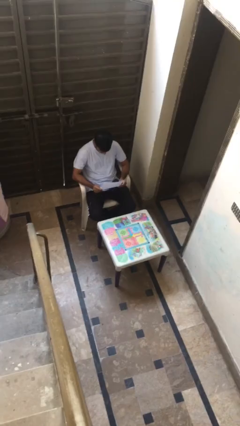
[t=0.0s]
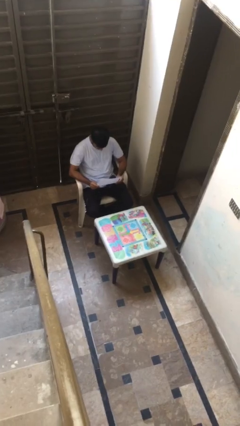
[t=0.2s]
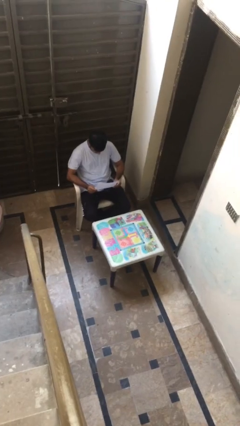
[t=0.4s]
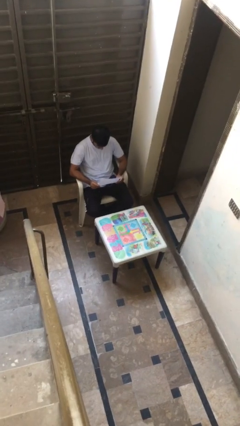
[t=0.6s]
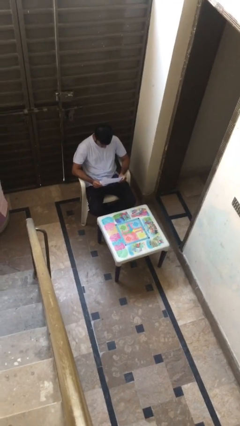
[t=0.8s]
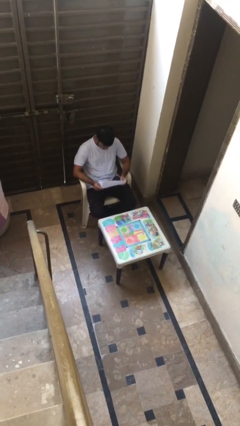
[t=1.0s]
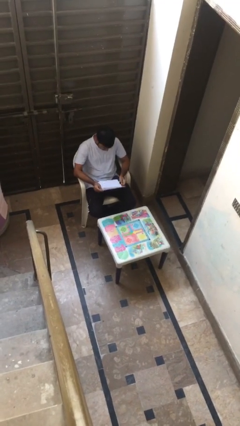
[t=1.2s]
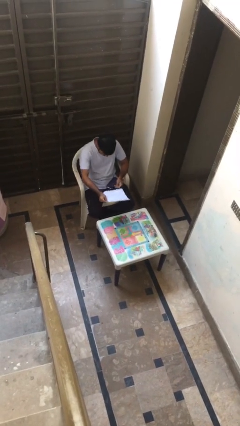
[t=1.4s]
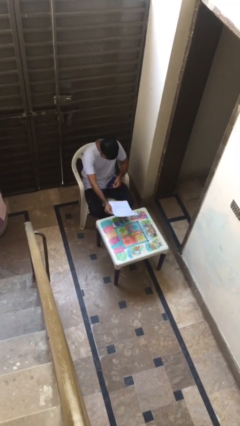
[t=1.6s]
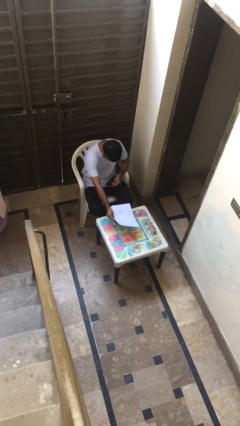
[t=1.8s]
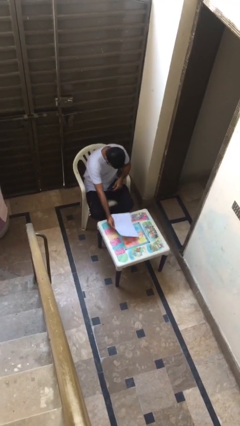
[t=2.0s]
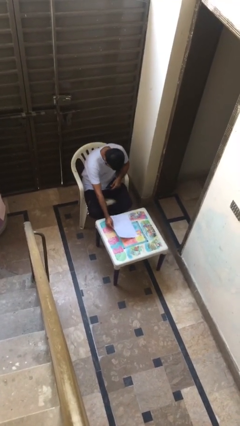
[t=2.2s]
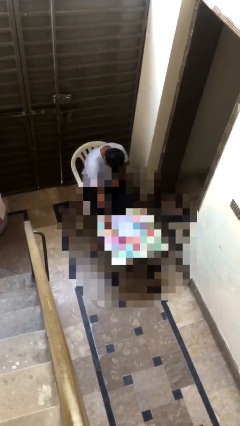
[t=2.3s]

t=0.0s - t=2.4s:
person puts down object on table

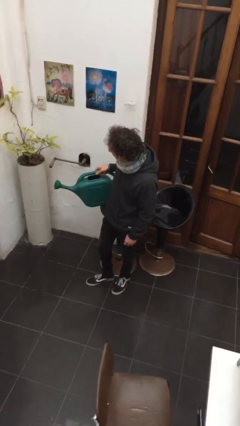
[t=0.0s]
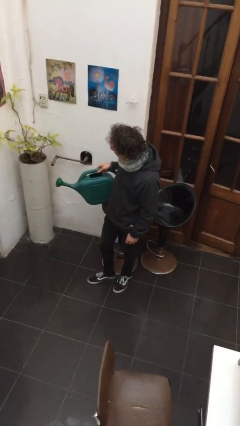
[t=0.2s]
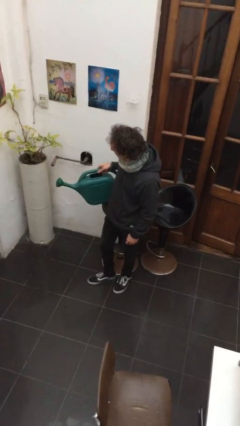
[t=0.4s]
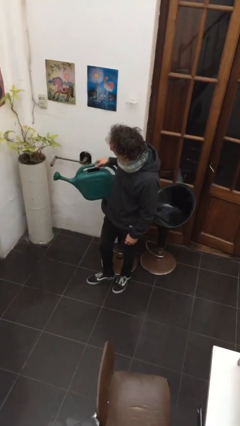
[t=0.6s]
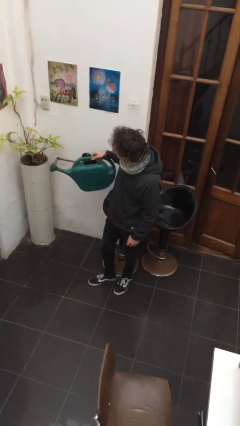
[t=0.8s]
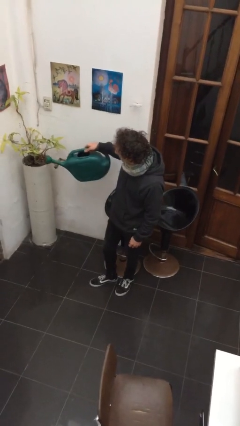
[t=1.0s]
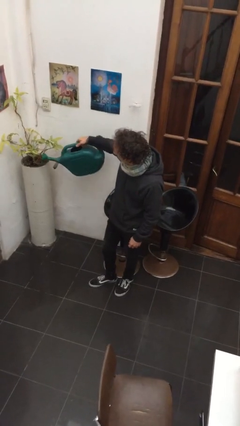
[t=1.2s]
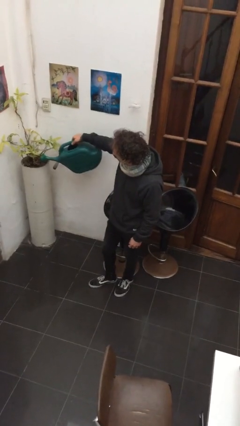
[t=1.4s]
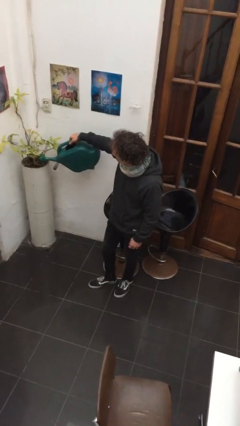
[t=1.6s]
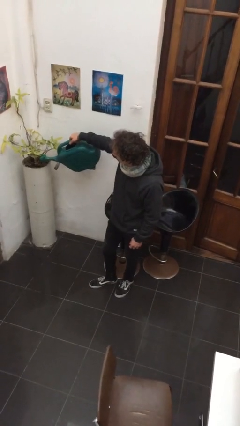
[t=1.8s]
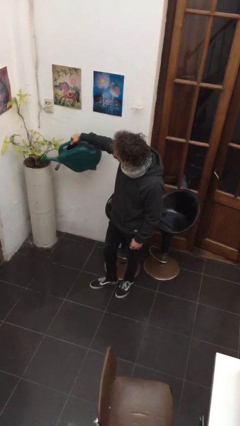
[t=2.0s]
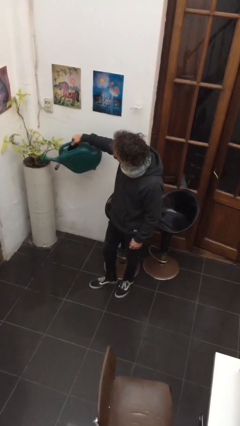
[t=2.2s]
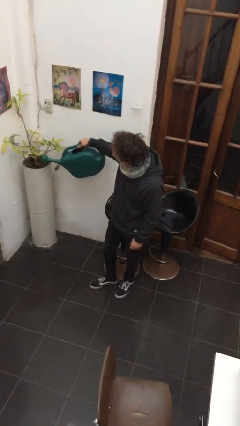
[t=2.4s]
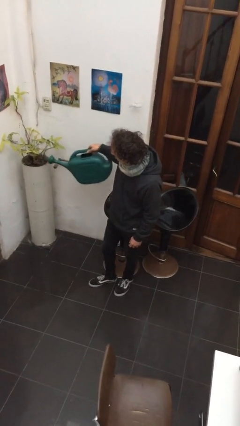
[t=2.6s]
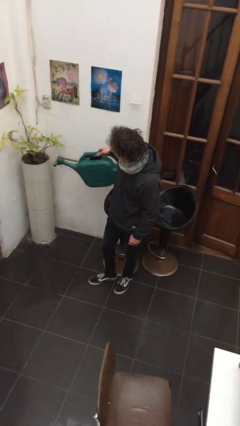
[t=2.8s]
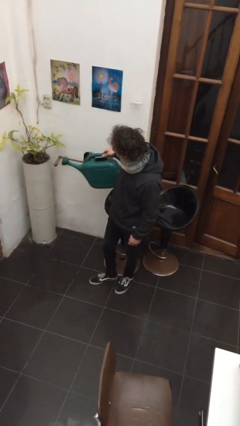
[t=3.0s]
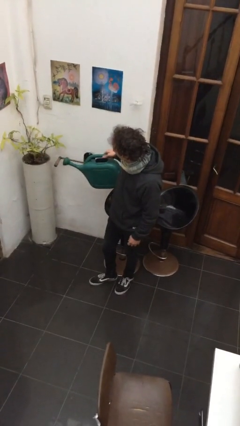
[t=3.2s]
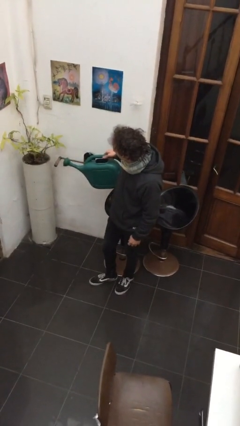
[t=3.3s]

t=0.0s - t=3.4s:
person waters houseplant

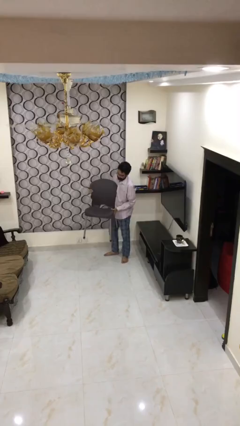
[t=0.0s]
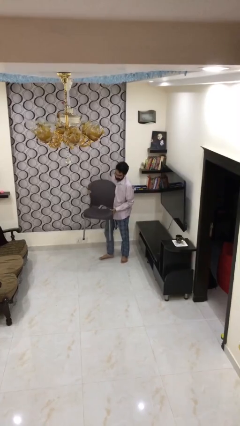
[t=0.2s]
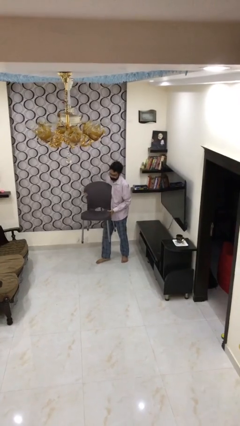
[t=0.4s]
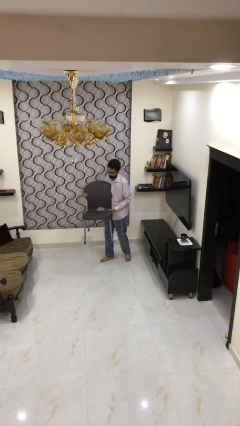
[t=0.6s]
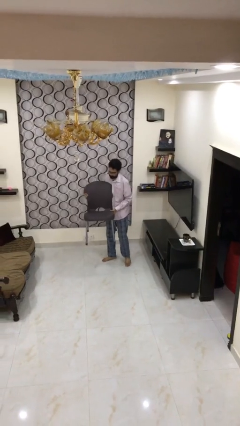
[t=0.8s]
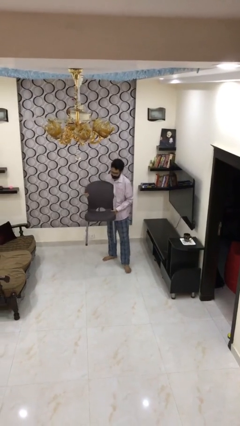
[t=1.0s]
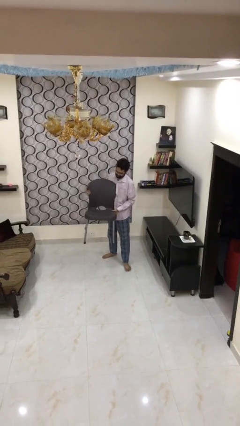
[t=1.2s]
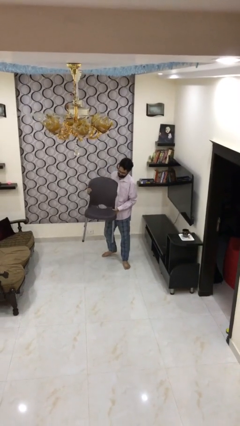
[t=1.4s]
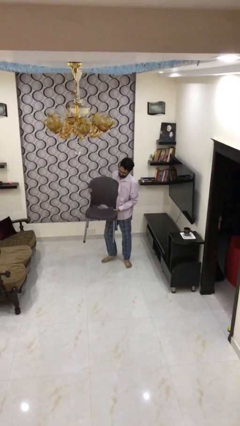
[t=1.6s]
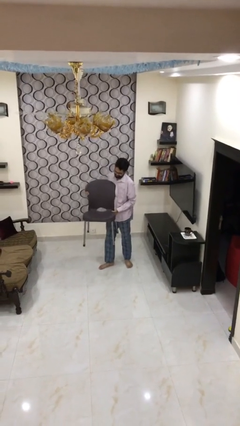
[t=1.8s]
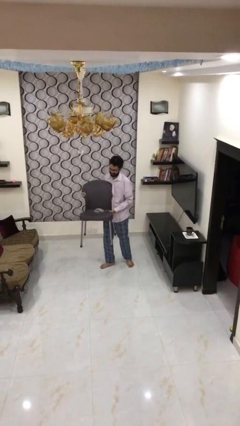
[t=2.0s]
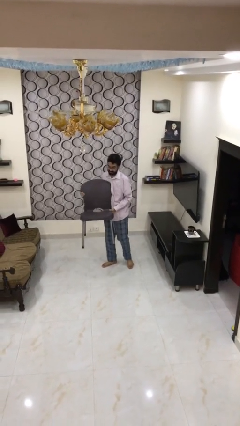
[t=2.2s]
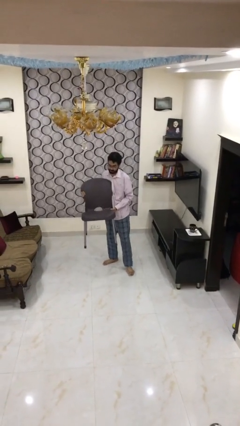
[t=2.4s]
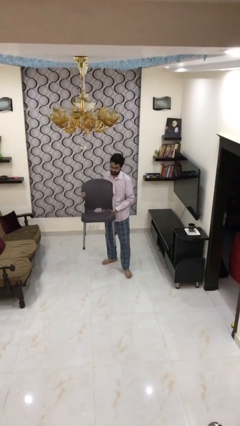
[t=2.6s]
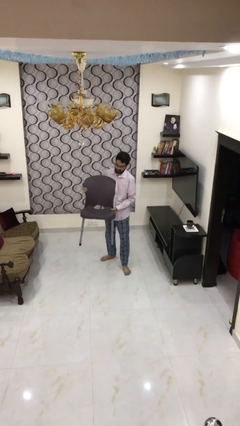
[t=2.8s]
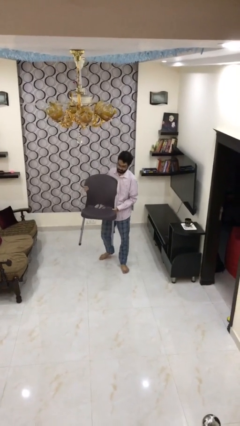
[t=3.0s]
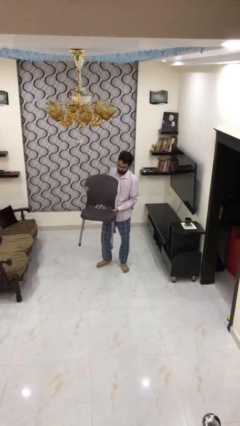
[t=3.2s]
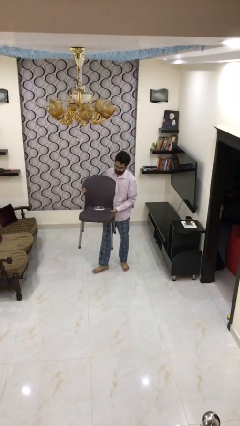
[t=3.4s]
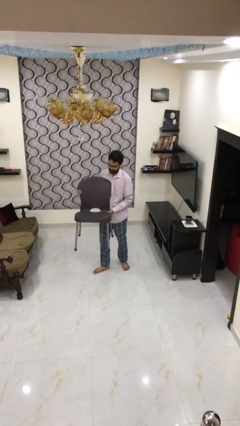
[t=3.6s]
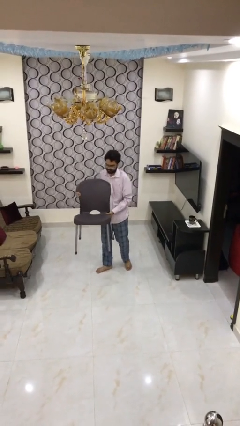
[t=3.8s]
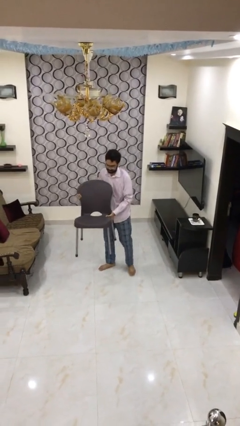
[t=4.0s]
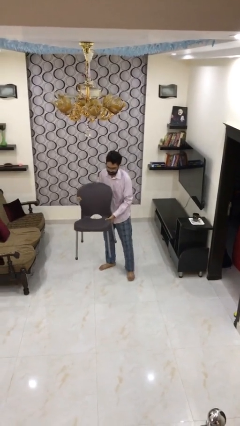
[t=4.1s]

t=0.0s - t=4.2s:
person carries heavy object

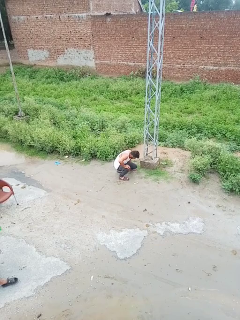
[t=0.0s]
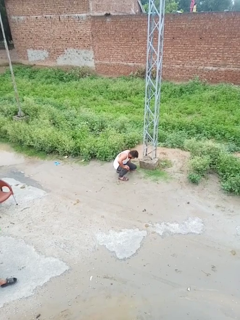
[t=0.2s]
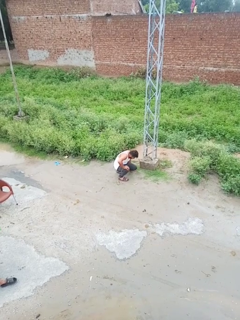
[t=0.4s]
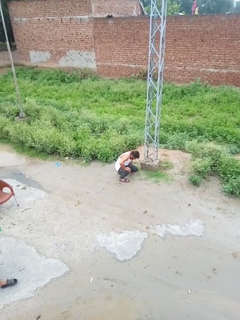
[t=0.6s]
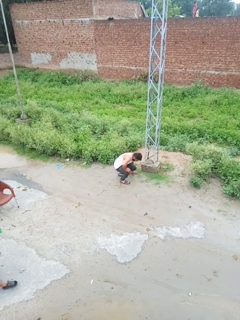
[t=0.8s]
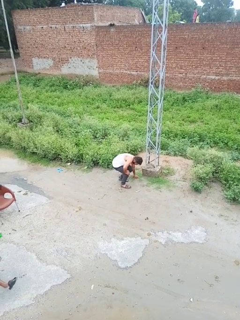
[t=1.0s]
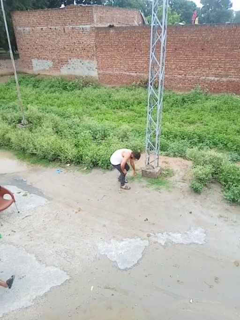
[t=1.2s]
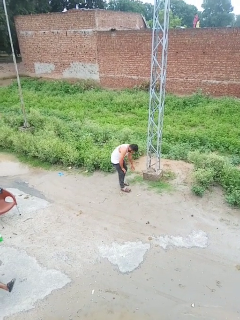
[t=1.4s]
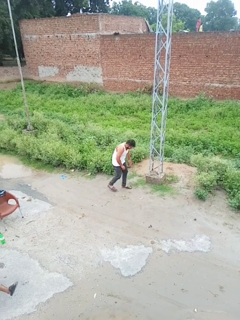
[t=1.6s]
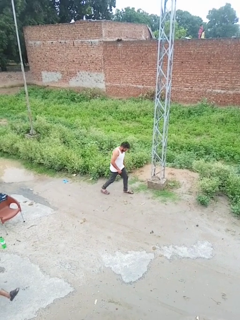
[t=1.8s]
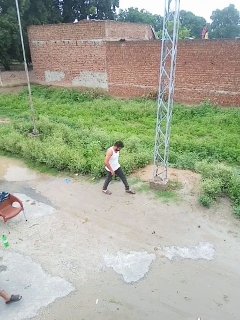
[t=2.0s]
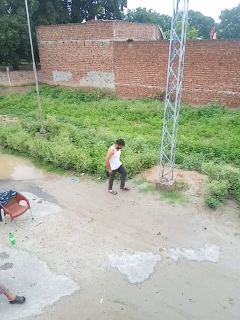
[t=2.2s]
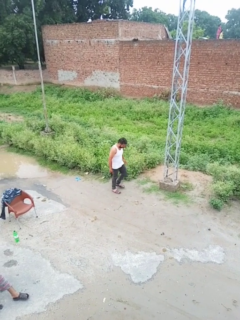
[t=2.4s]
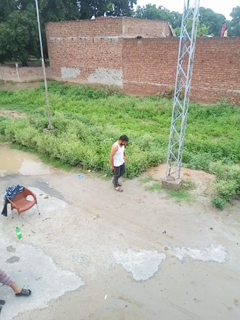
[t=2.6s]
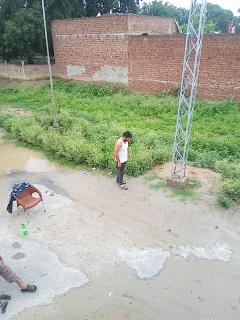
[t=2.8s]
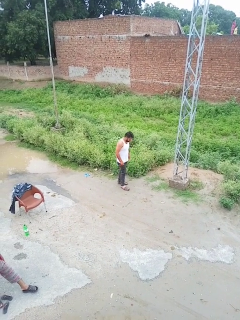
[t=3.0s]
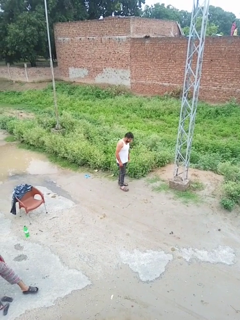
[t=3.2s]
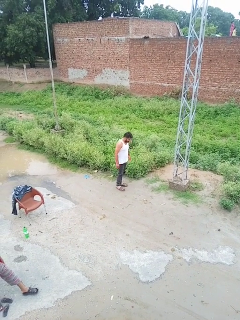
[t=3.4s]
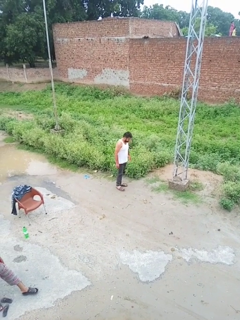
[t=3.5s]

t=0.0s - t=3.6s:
person stands up from floor

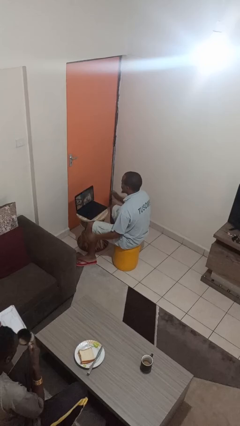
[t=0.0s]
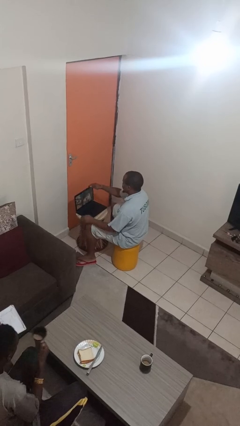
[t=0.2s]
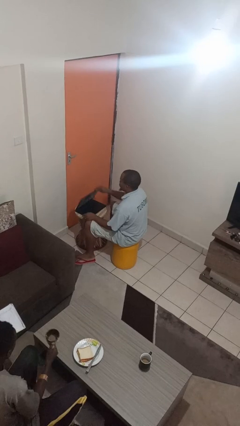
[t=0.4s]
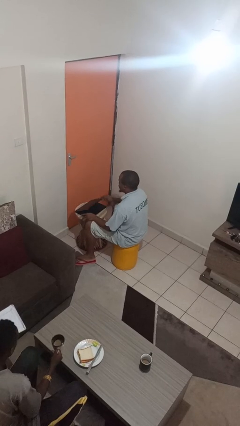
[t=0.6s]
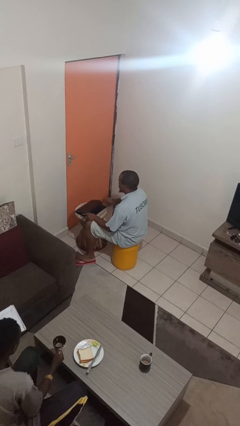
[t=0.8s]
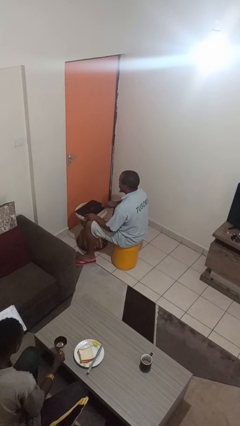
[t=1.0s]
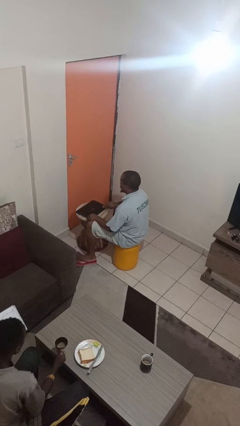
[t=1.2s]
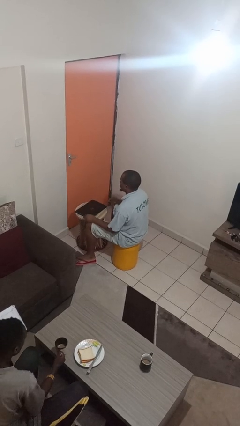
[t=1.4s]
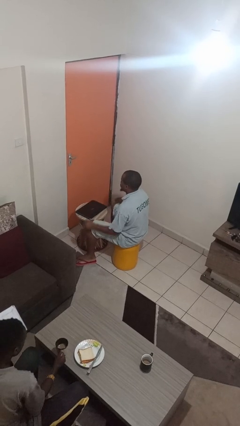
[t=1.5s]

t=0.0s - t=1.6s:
person closes laptop

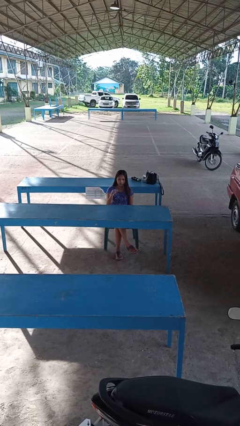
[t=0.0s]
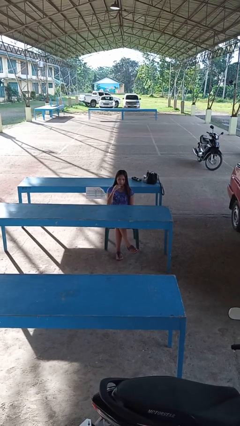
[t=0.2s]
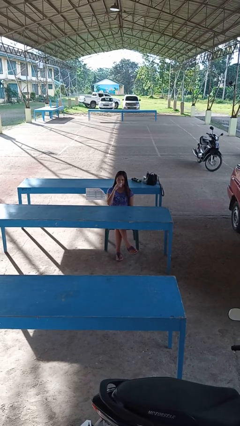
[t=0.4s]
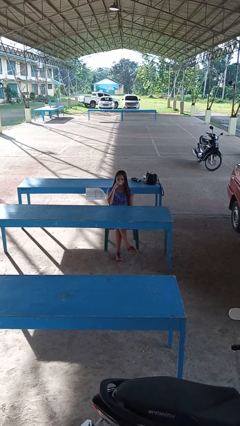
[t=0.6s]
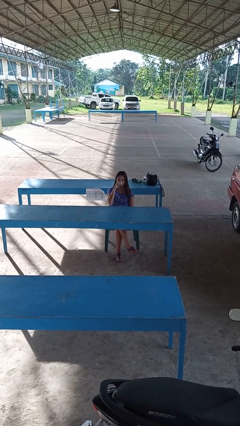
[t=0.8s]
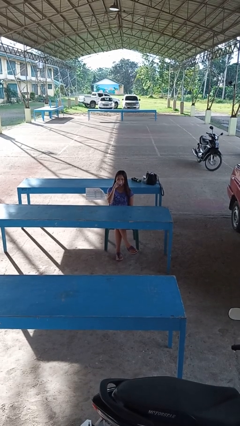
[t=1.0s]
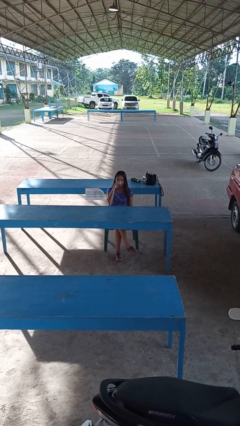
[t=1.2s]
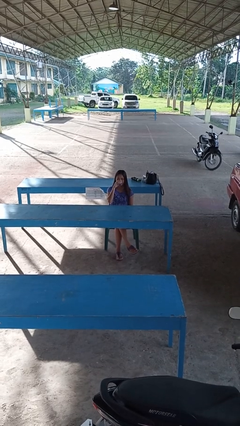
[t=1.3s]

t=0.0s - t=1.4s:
person drinks from shotglass

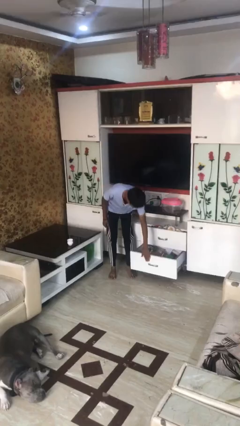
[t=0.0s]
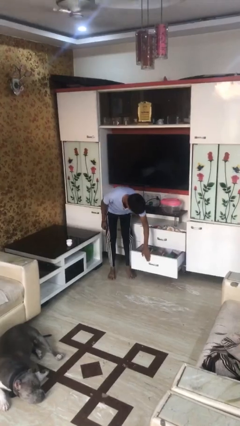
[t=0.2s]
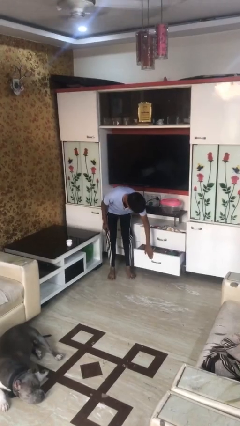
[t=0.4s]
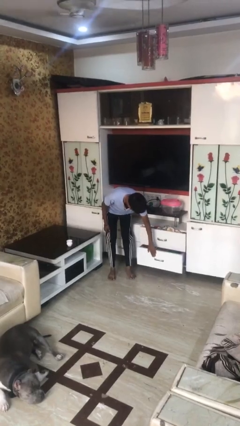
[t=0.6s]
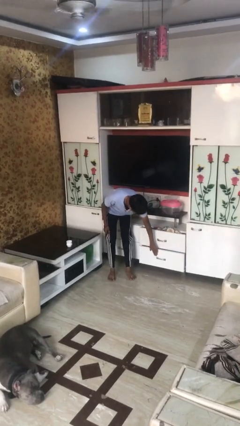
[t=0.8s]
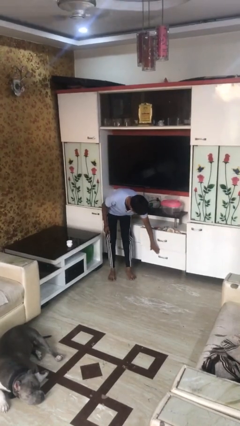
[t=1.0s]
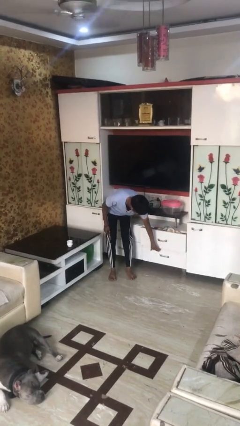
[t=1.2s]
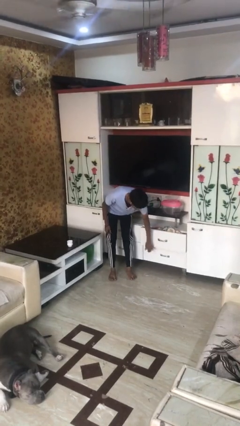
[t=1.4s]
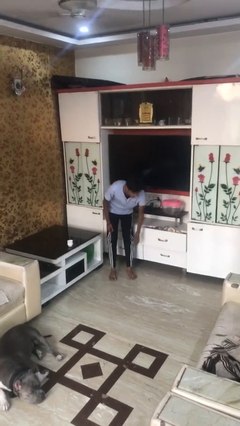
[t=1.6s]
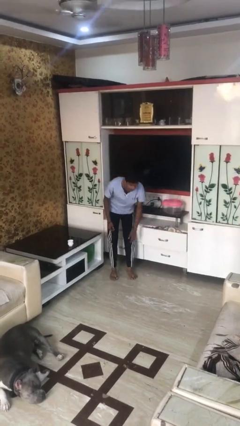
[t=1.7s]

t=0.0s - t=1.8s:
person closes dresser drawer
